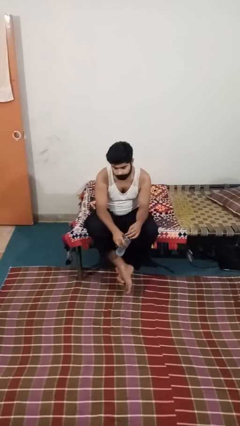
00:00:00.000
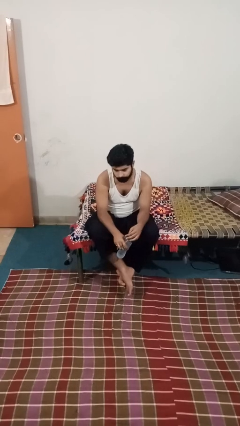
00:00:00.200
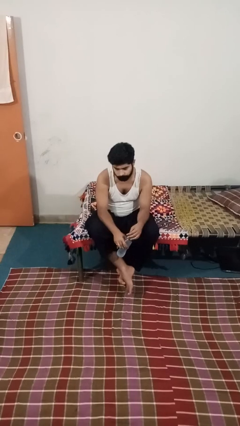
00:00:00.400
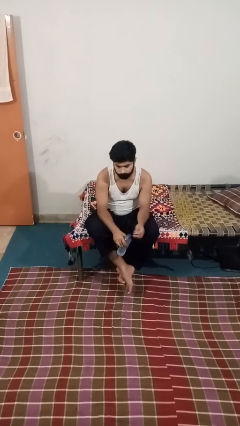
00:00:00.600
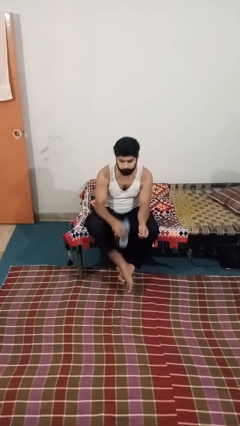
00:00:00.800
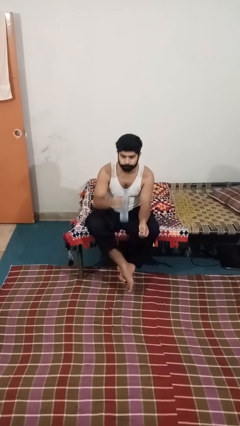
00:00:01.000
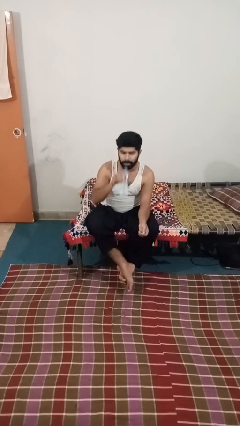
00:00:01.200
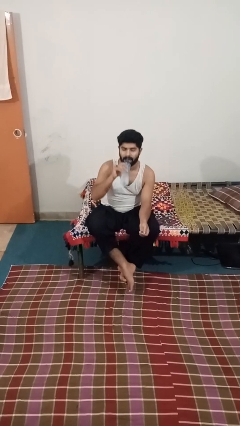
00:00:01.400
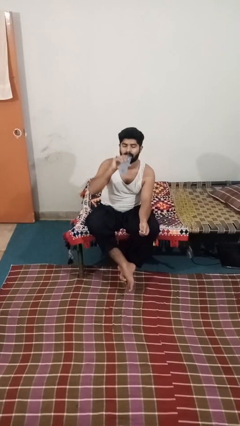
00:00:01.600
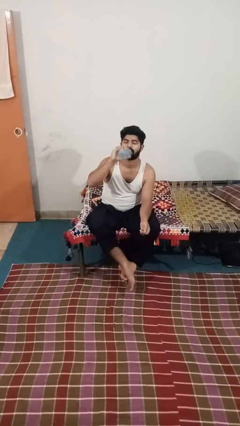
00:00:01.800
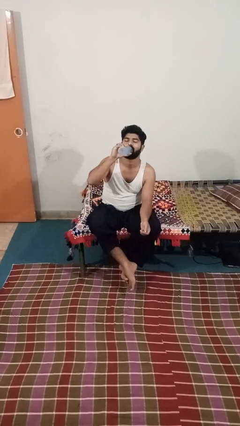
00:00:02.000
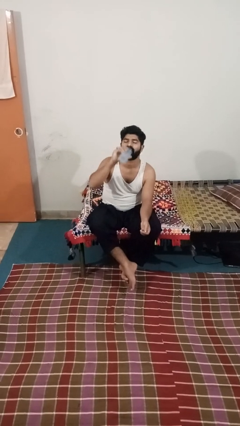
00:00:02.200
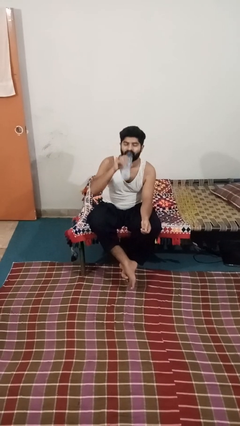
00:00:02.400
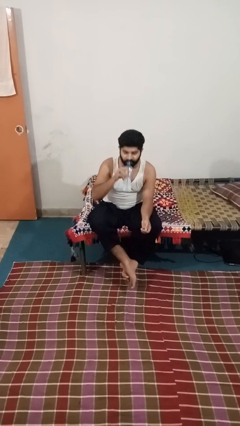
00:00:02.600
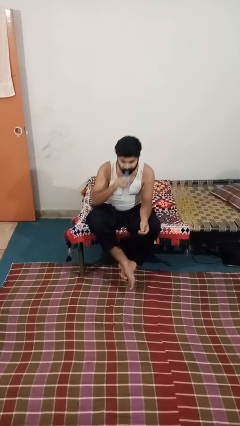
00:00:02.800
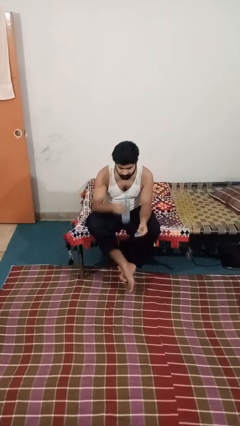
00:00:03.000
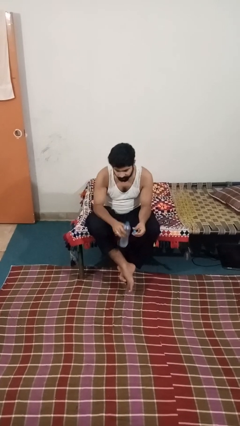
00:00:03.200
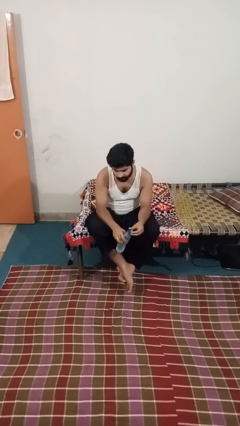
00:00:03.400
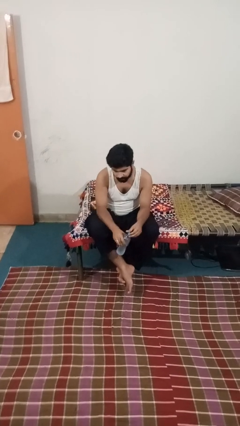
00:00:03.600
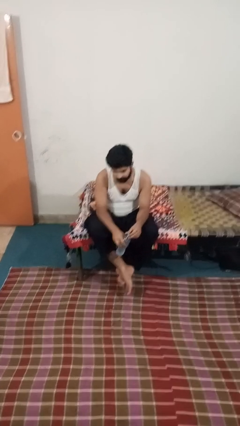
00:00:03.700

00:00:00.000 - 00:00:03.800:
person drinks from bottle

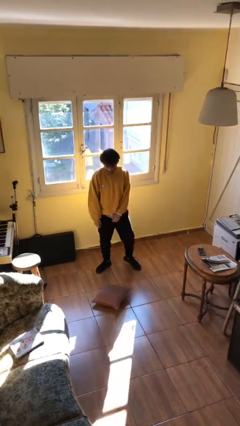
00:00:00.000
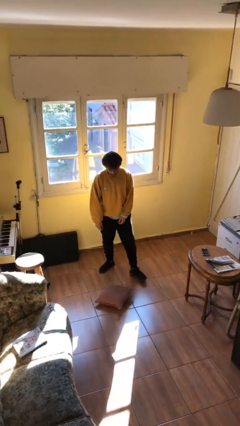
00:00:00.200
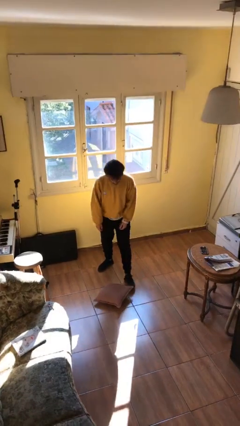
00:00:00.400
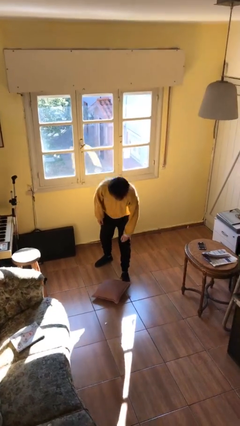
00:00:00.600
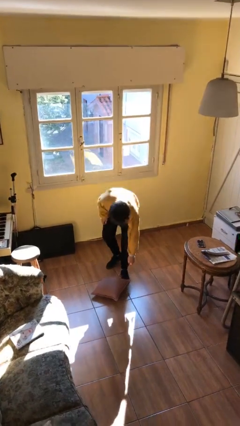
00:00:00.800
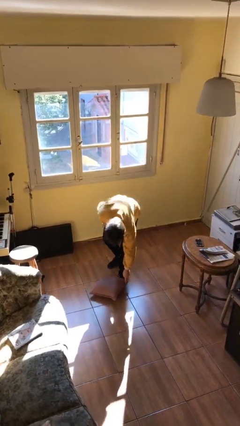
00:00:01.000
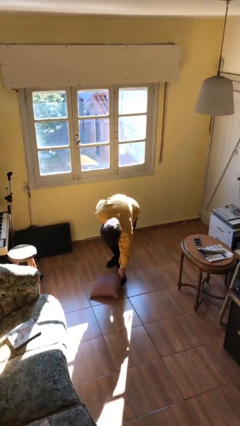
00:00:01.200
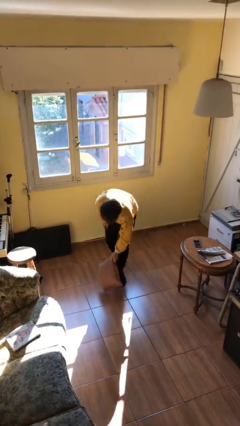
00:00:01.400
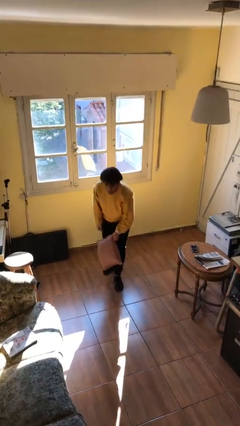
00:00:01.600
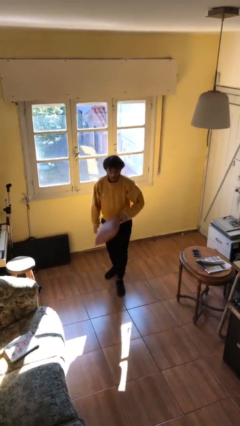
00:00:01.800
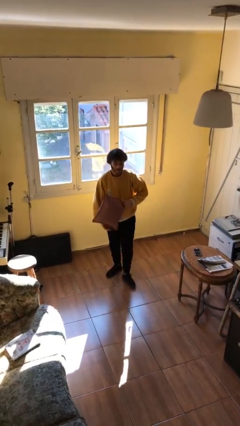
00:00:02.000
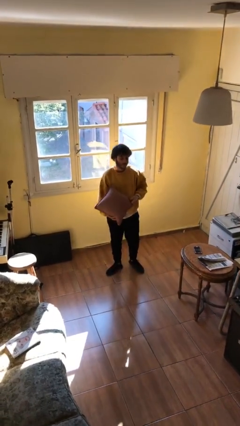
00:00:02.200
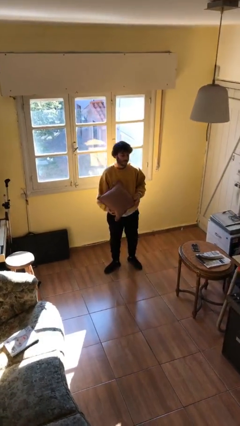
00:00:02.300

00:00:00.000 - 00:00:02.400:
person picks up object from floor

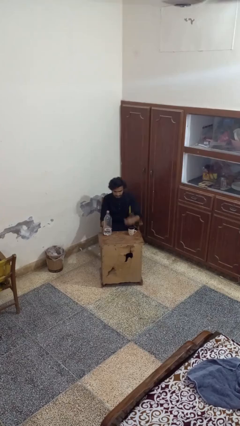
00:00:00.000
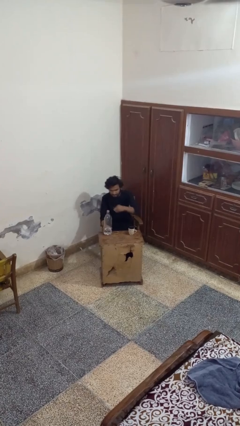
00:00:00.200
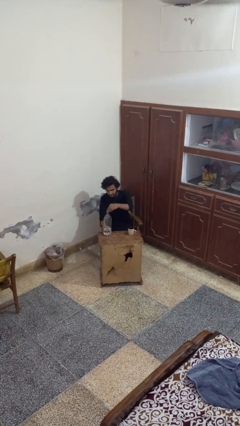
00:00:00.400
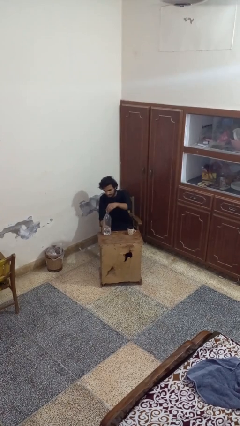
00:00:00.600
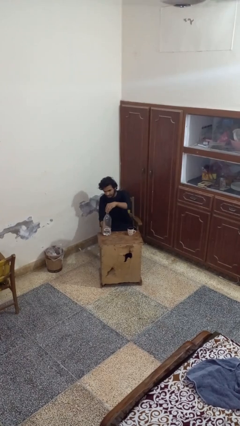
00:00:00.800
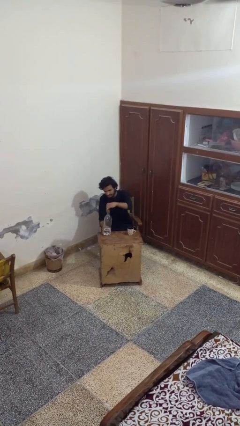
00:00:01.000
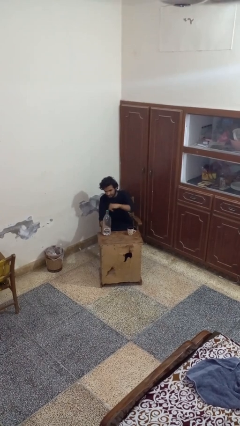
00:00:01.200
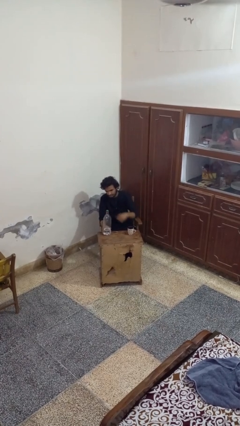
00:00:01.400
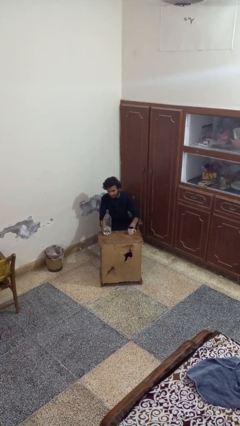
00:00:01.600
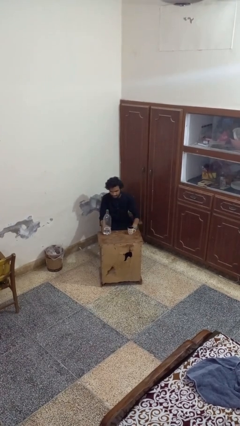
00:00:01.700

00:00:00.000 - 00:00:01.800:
person screws lid to bottle

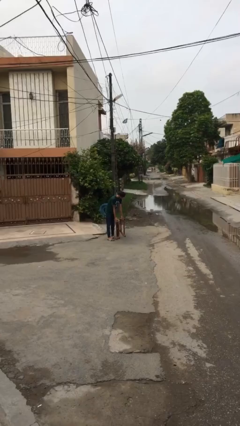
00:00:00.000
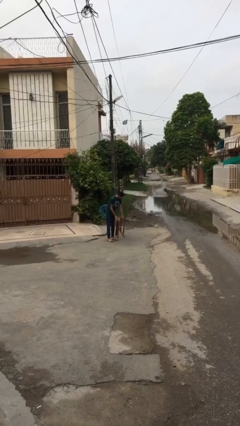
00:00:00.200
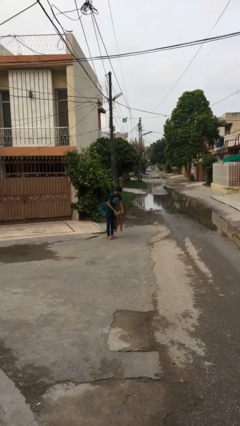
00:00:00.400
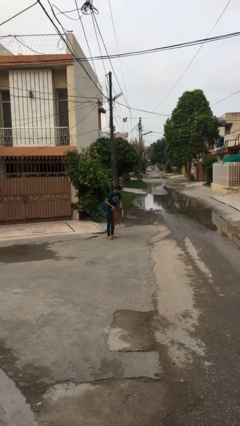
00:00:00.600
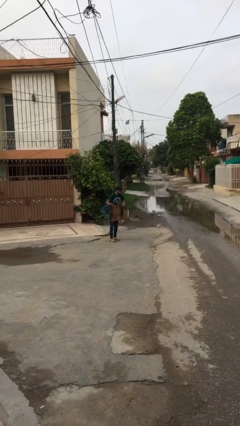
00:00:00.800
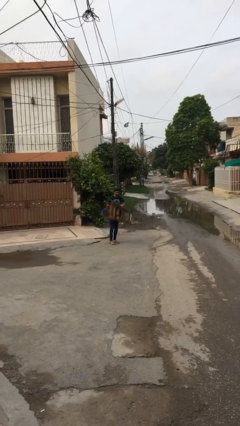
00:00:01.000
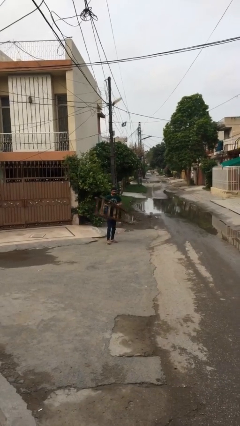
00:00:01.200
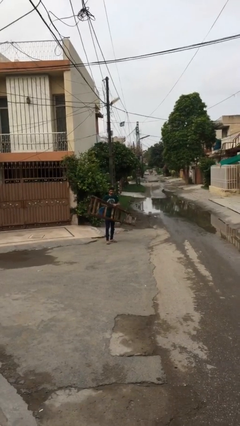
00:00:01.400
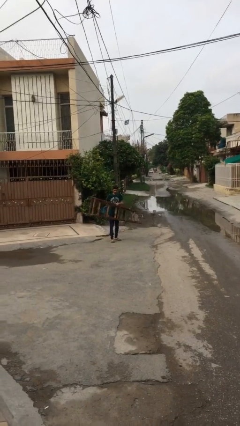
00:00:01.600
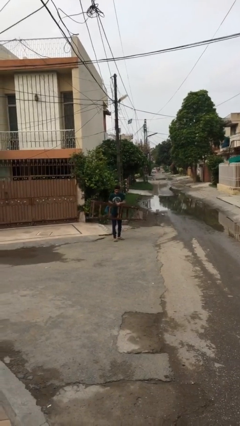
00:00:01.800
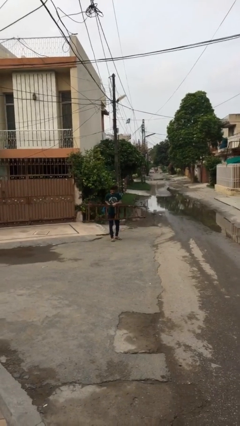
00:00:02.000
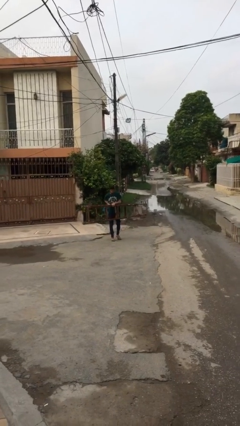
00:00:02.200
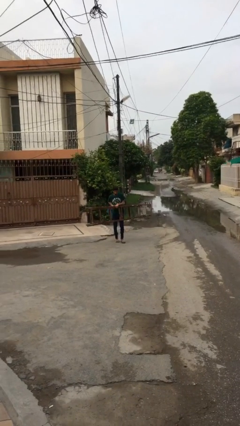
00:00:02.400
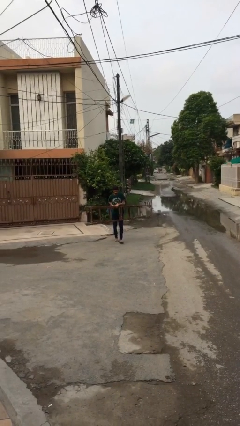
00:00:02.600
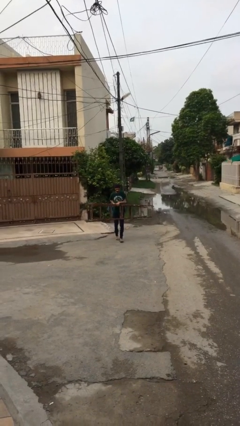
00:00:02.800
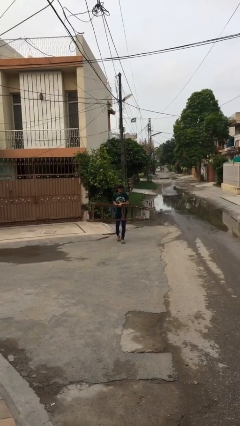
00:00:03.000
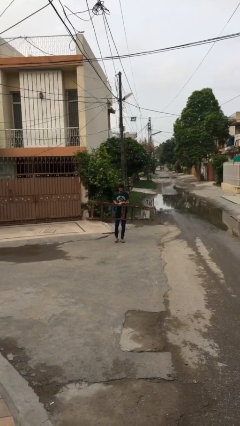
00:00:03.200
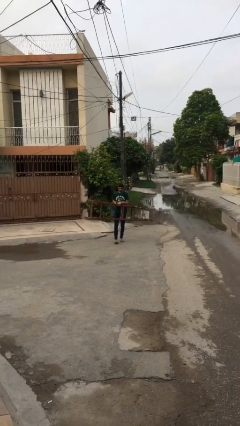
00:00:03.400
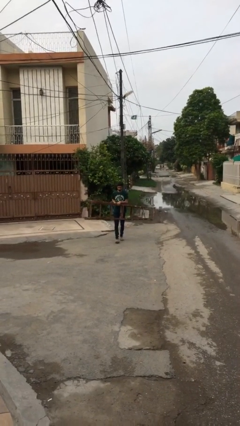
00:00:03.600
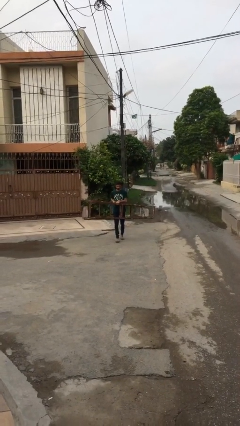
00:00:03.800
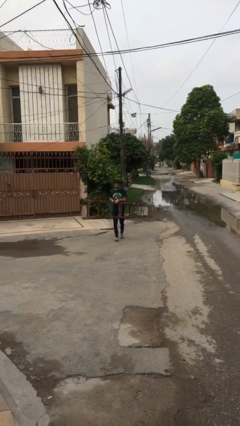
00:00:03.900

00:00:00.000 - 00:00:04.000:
person carries heavy object

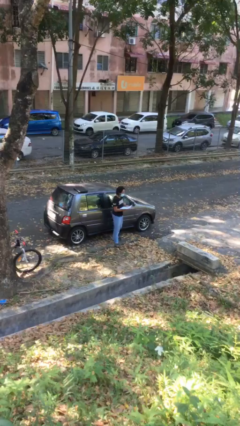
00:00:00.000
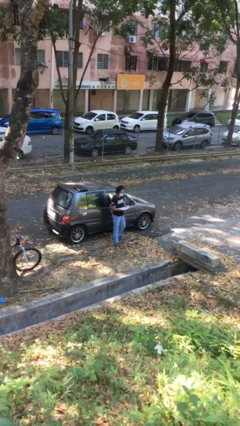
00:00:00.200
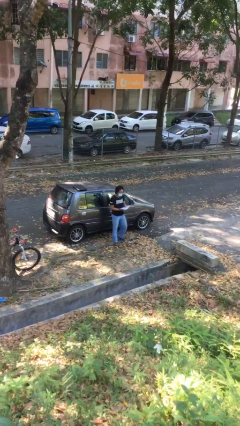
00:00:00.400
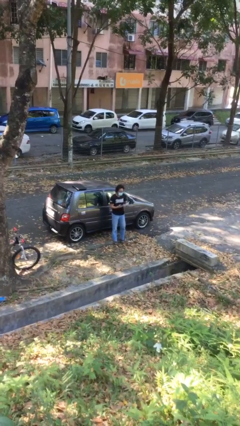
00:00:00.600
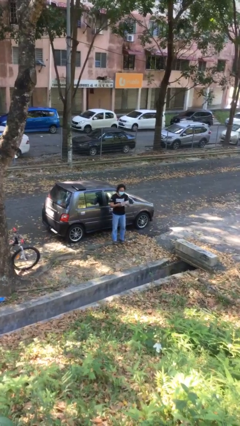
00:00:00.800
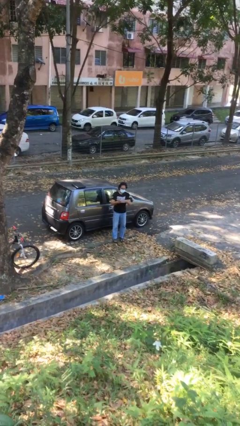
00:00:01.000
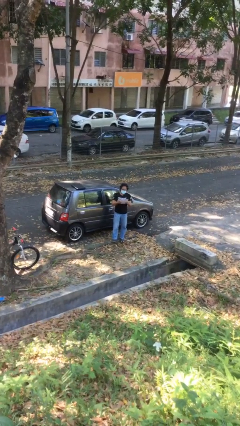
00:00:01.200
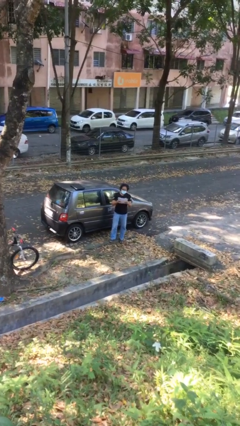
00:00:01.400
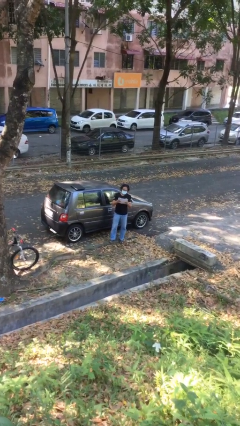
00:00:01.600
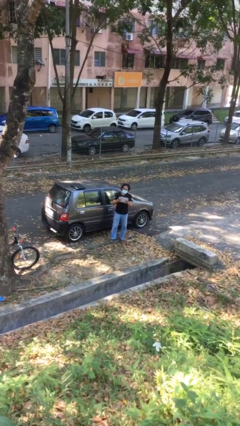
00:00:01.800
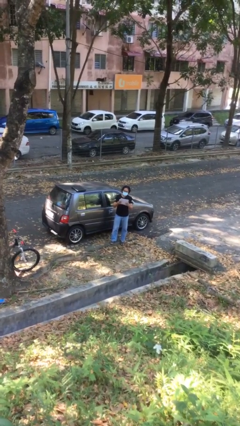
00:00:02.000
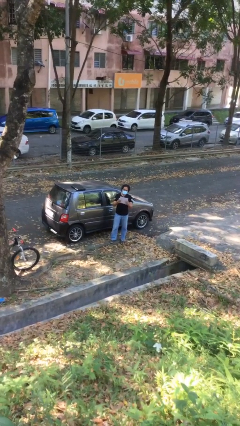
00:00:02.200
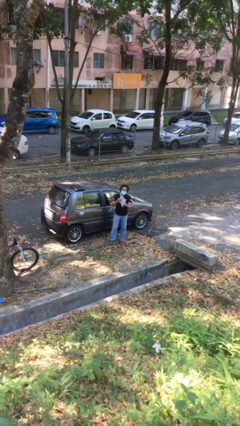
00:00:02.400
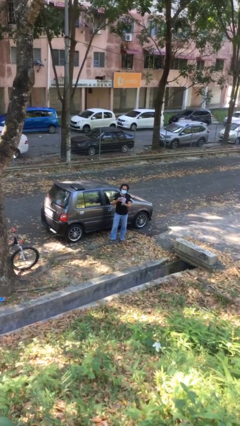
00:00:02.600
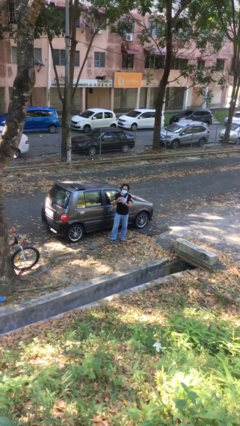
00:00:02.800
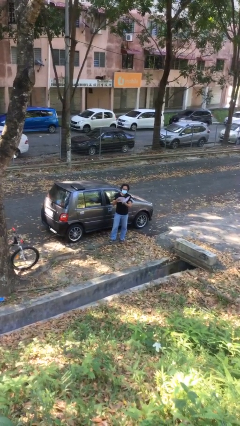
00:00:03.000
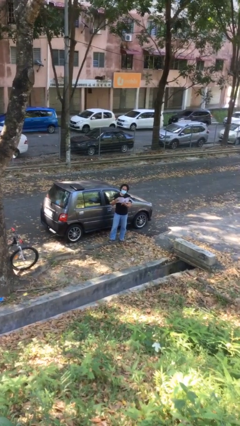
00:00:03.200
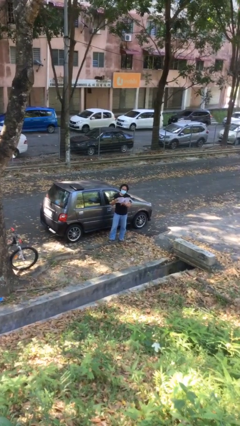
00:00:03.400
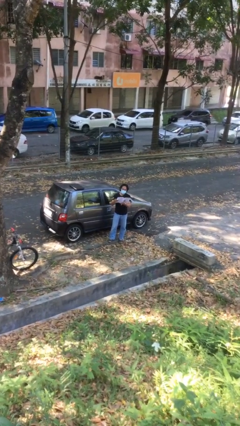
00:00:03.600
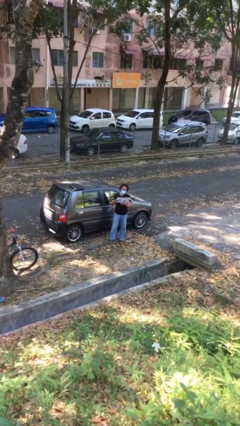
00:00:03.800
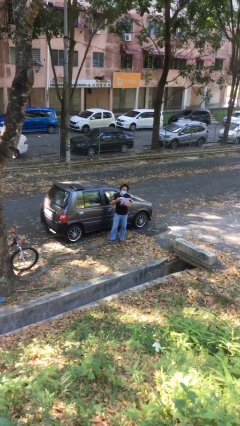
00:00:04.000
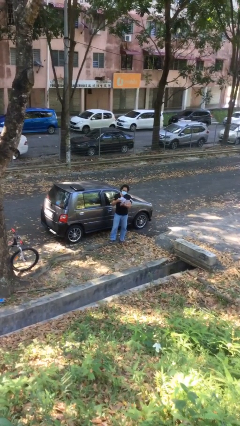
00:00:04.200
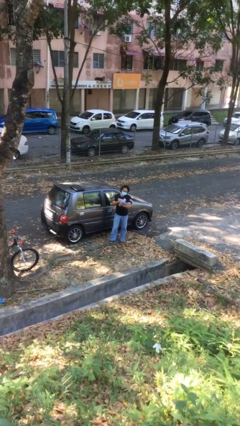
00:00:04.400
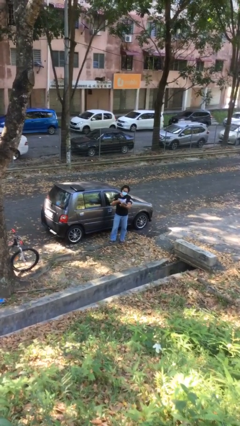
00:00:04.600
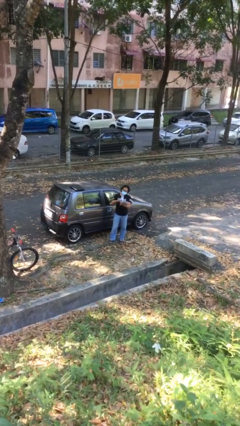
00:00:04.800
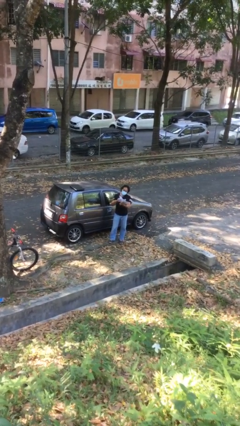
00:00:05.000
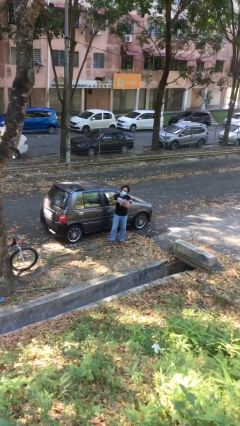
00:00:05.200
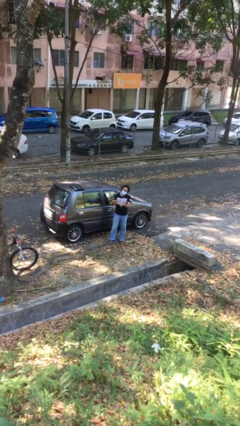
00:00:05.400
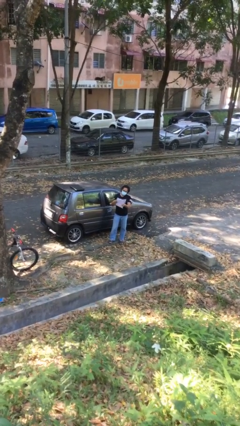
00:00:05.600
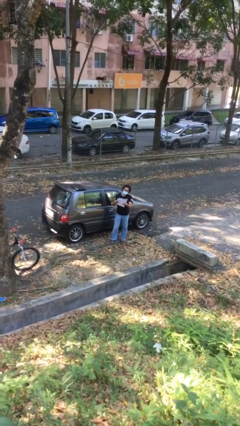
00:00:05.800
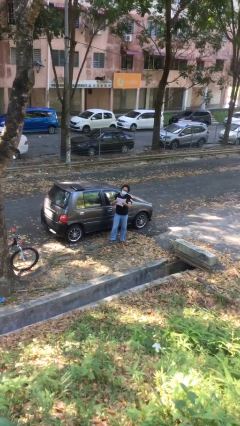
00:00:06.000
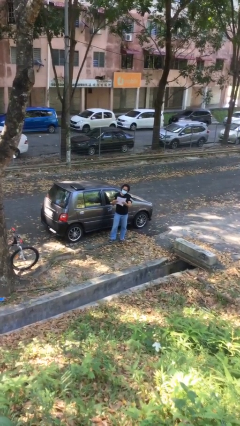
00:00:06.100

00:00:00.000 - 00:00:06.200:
person reads document
